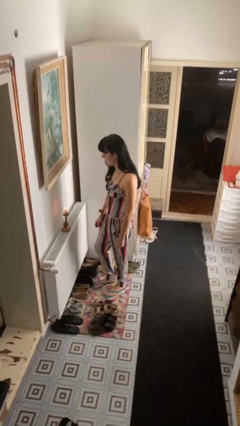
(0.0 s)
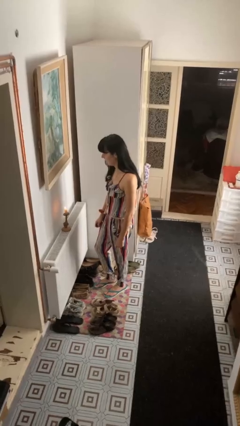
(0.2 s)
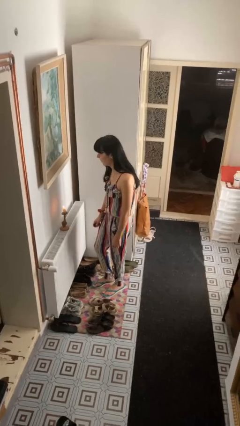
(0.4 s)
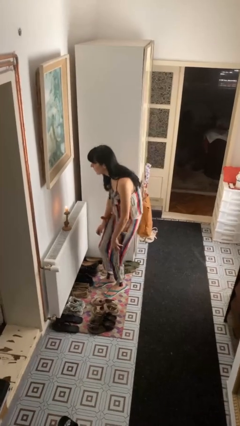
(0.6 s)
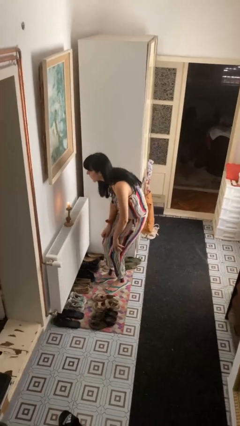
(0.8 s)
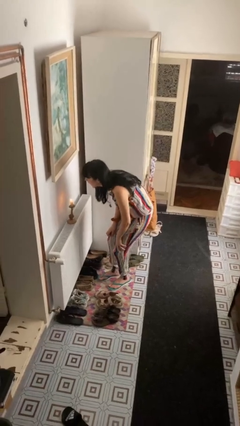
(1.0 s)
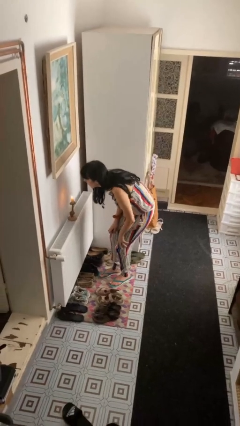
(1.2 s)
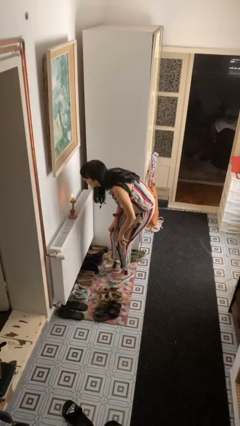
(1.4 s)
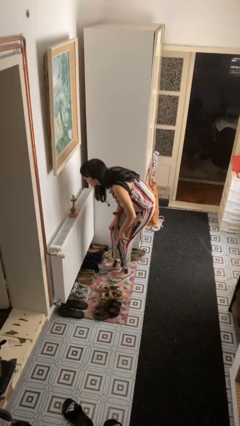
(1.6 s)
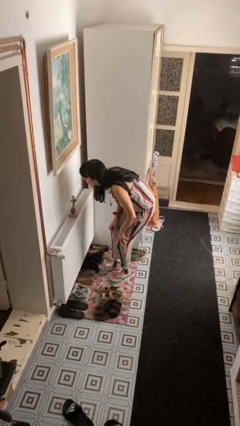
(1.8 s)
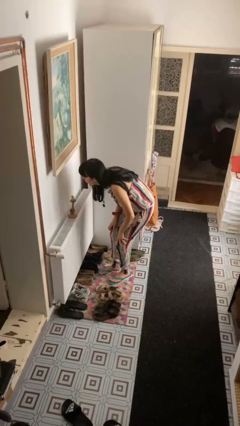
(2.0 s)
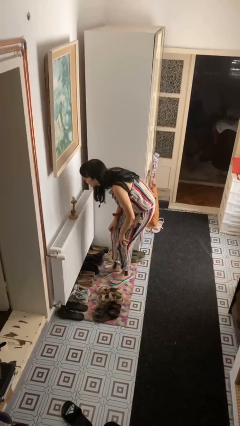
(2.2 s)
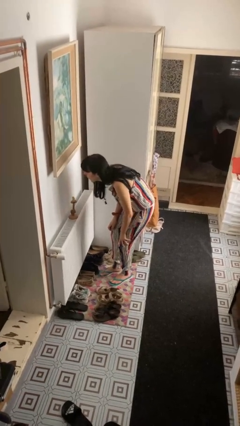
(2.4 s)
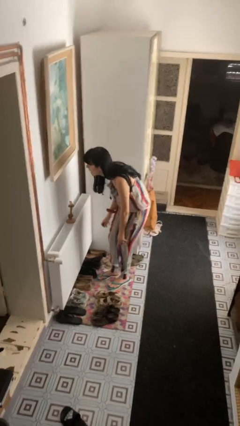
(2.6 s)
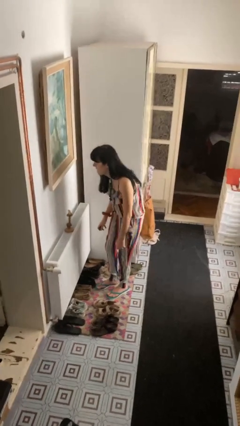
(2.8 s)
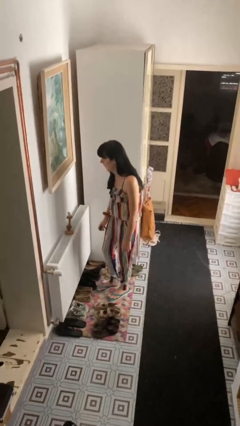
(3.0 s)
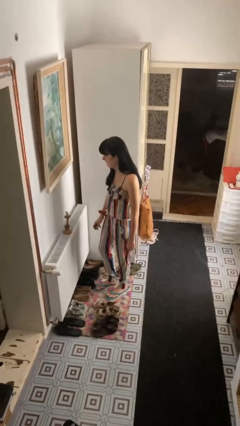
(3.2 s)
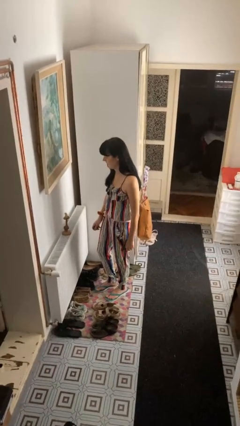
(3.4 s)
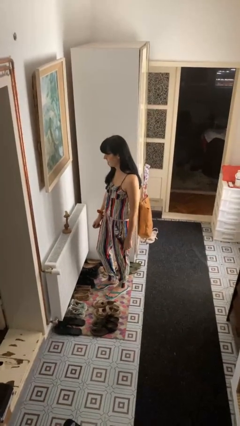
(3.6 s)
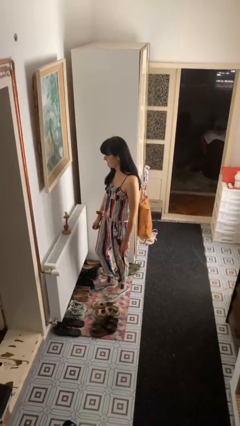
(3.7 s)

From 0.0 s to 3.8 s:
person extinguishes candle

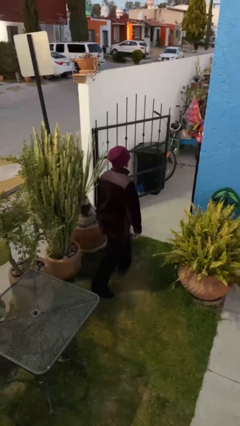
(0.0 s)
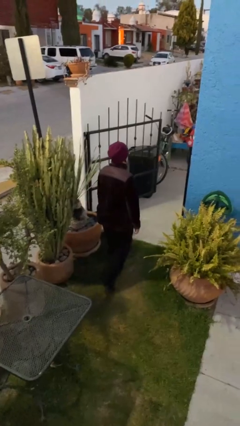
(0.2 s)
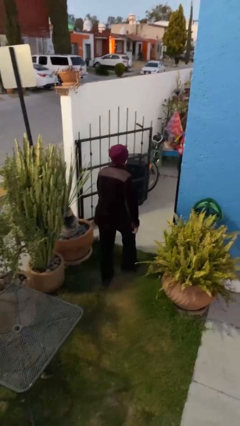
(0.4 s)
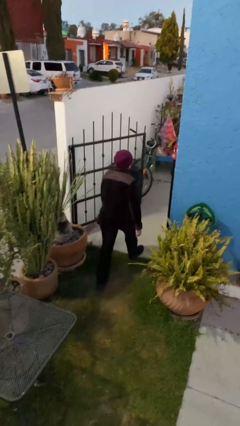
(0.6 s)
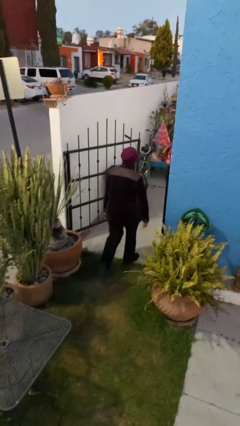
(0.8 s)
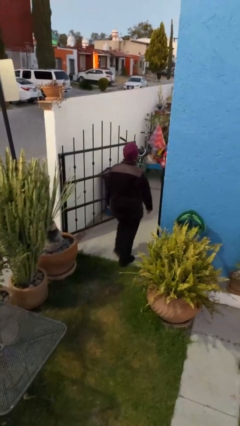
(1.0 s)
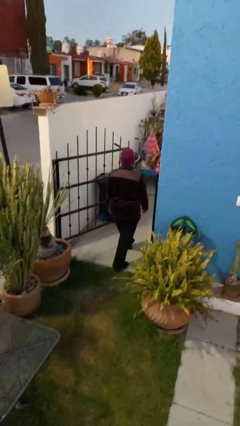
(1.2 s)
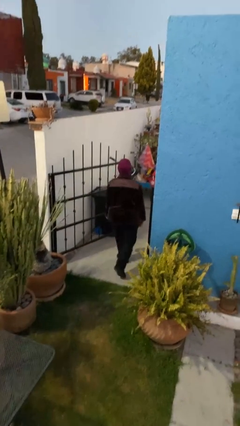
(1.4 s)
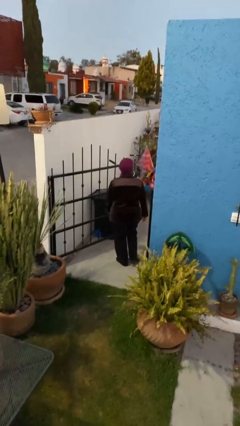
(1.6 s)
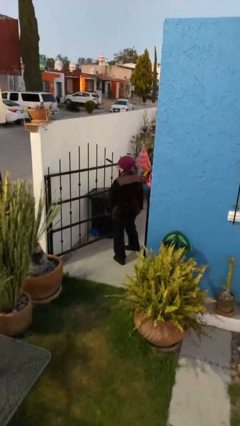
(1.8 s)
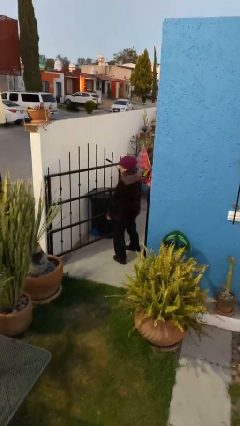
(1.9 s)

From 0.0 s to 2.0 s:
person enters scene through structure

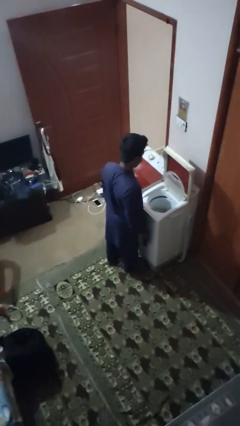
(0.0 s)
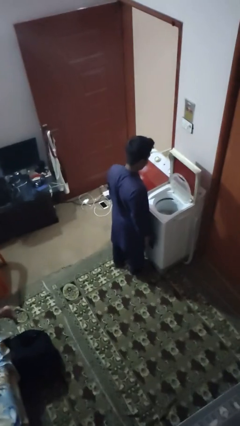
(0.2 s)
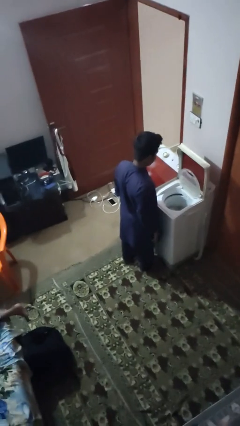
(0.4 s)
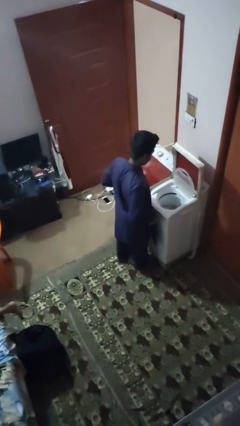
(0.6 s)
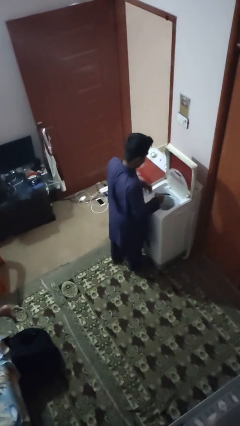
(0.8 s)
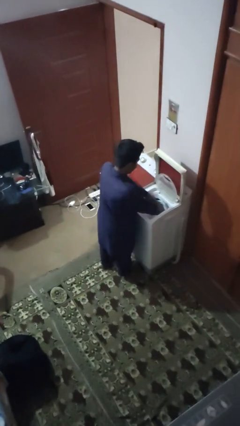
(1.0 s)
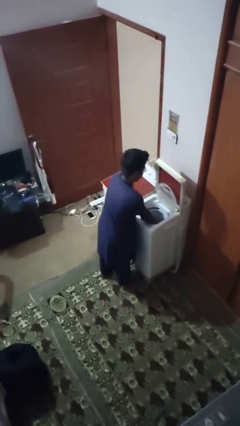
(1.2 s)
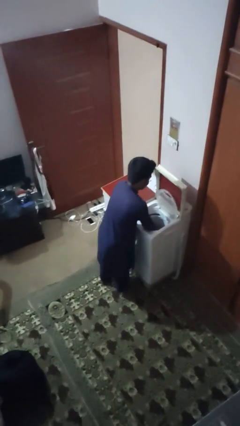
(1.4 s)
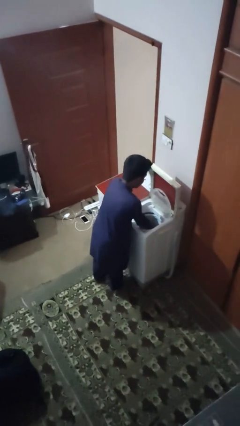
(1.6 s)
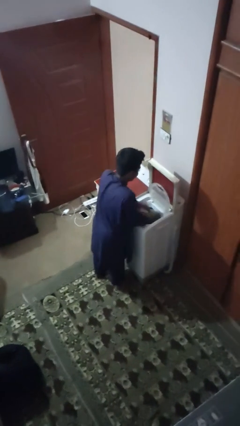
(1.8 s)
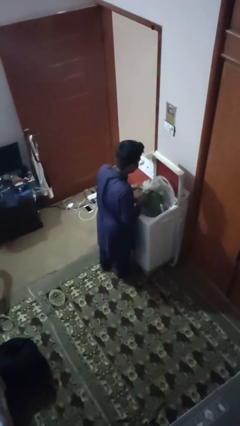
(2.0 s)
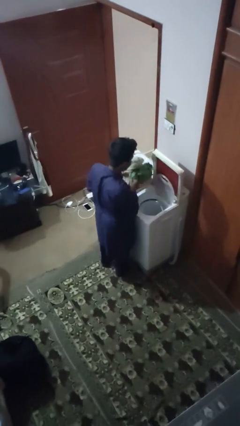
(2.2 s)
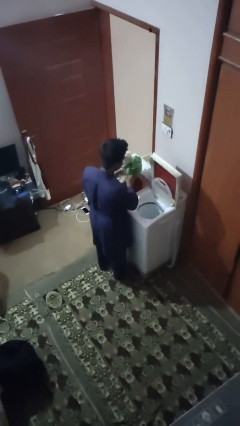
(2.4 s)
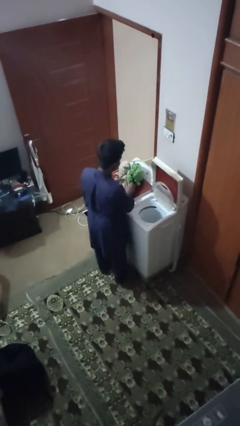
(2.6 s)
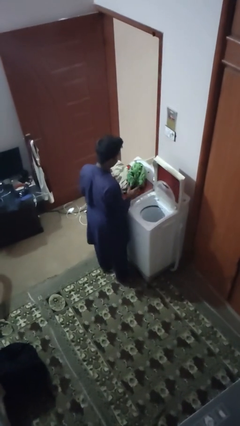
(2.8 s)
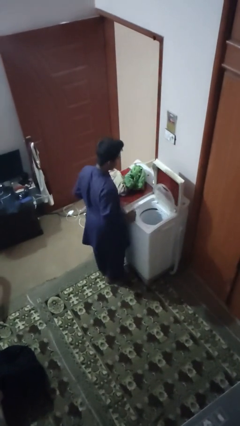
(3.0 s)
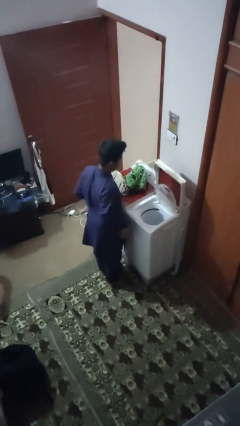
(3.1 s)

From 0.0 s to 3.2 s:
person unloads dryer

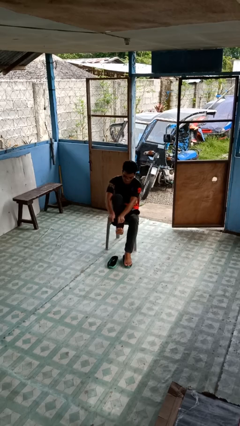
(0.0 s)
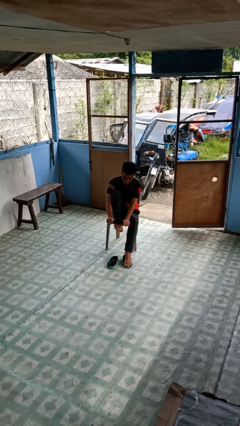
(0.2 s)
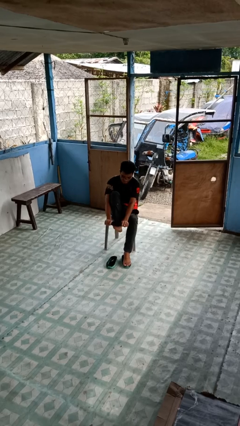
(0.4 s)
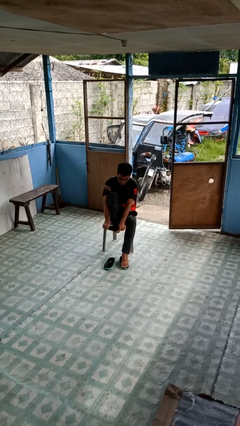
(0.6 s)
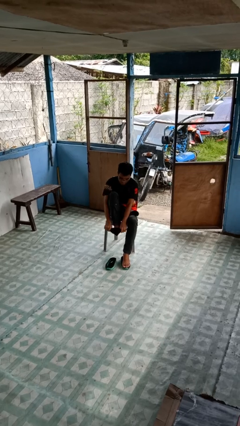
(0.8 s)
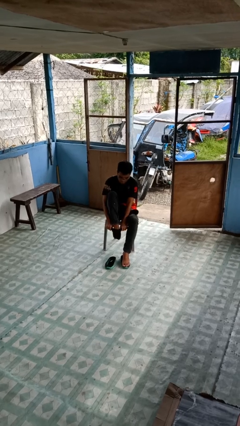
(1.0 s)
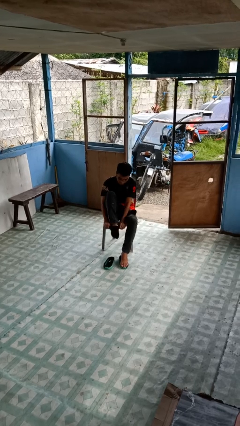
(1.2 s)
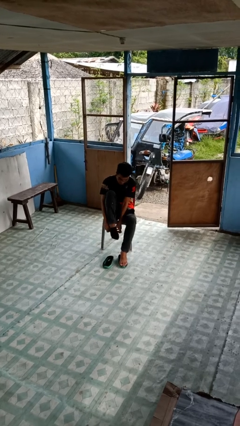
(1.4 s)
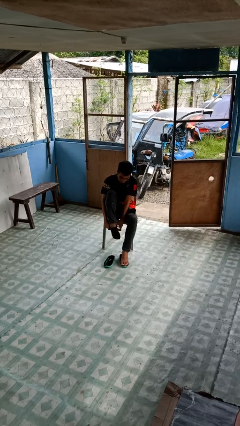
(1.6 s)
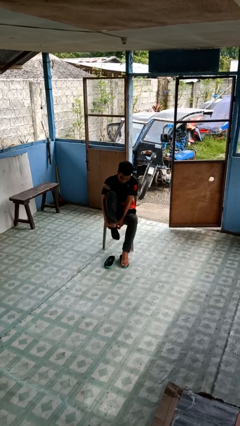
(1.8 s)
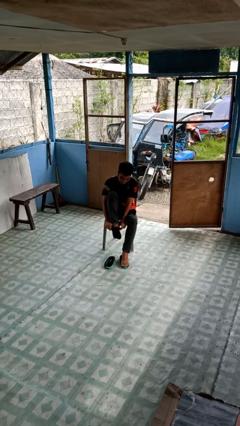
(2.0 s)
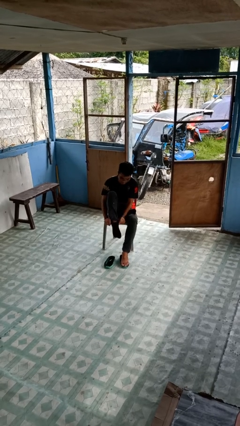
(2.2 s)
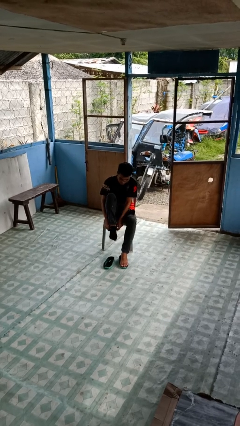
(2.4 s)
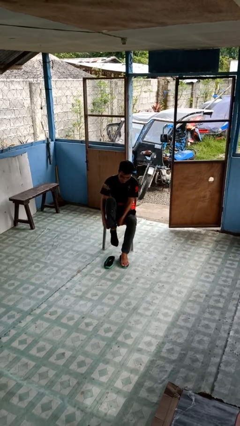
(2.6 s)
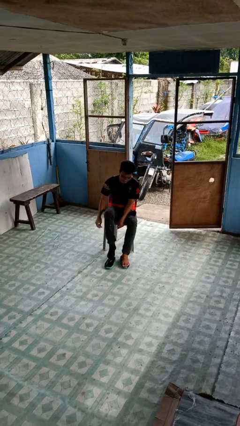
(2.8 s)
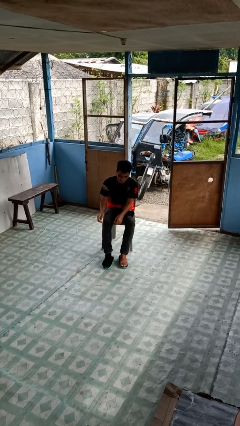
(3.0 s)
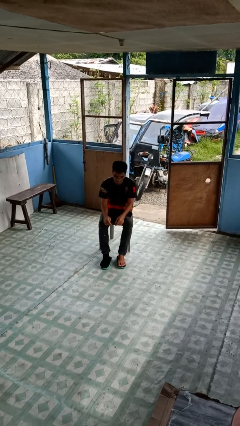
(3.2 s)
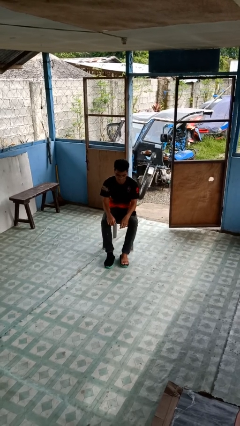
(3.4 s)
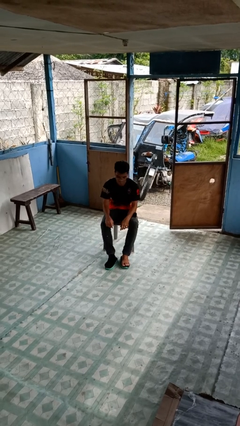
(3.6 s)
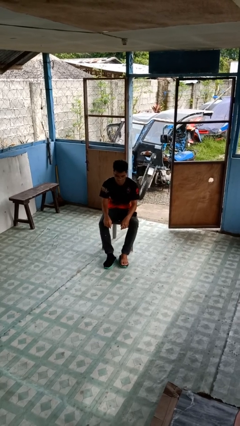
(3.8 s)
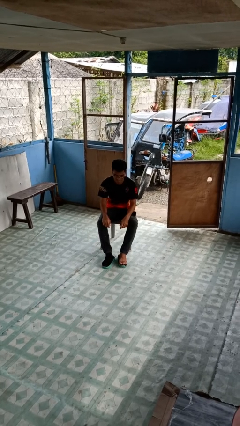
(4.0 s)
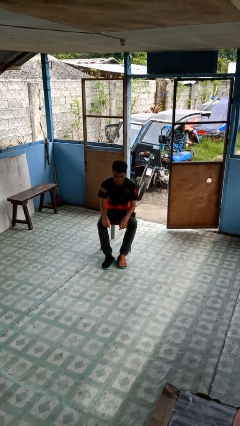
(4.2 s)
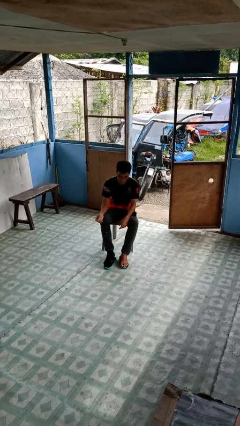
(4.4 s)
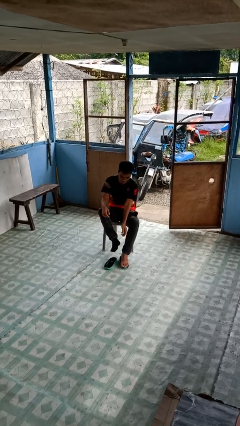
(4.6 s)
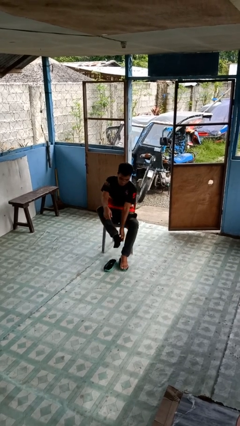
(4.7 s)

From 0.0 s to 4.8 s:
person puts on socks

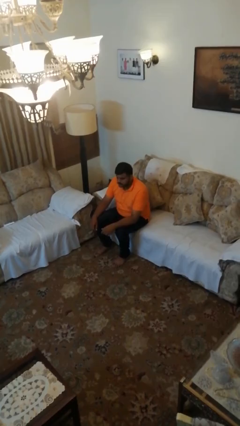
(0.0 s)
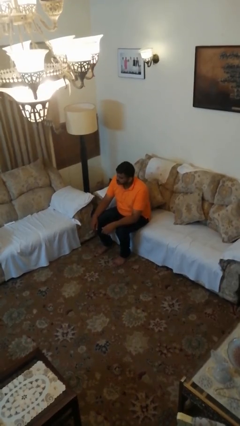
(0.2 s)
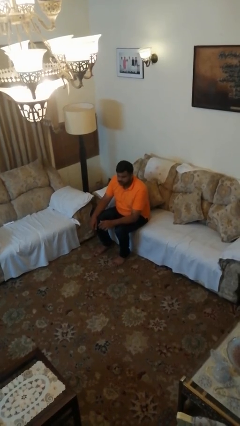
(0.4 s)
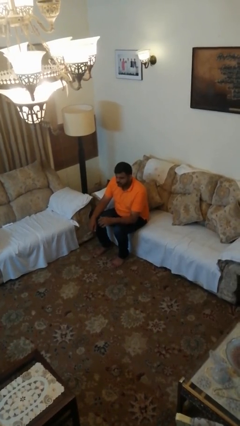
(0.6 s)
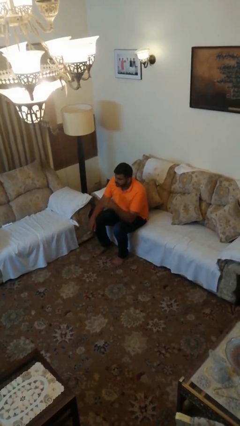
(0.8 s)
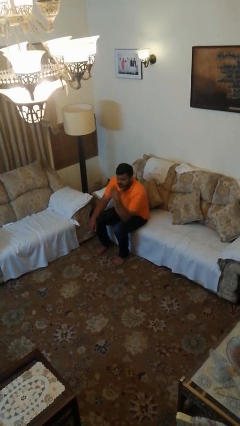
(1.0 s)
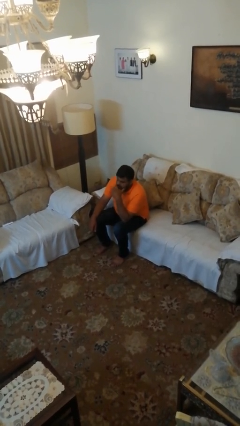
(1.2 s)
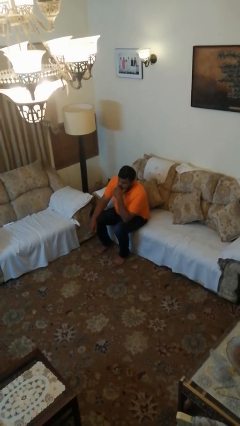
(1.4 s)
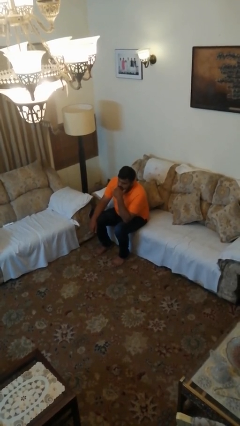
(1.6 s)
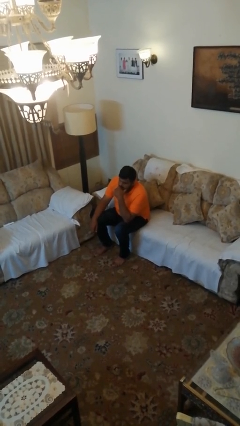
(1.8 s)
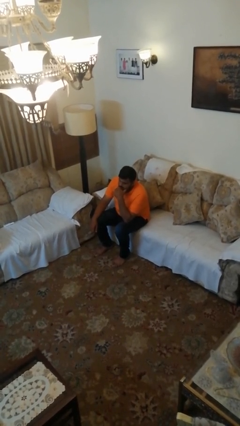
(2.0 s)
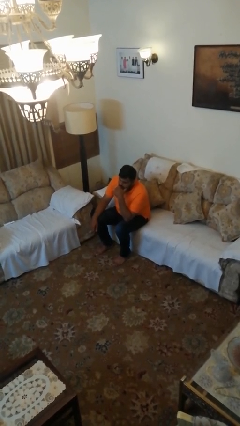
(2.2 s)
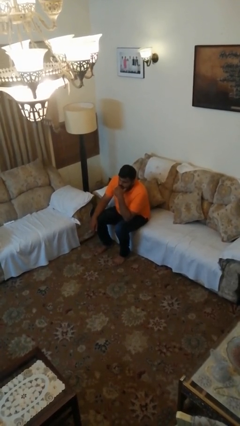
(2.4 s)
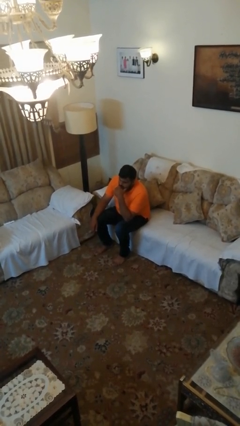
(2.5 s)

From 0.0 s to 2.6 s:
person strokes chin

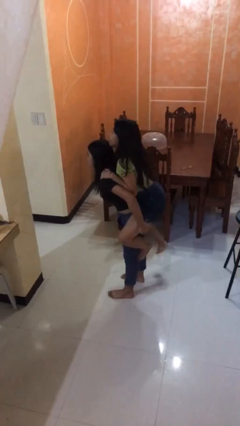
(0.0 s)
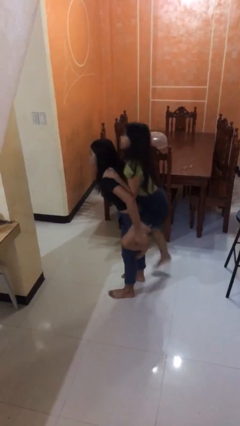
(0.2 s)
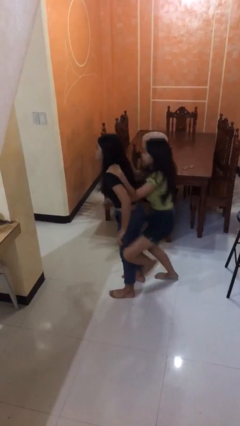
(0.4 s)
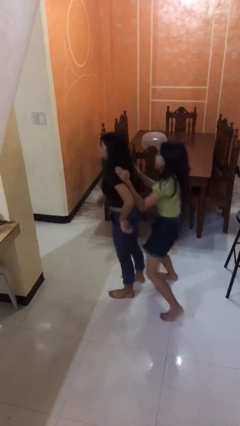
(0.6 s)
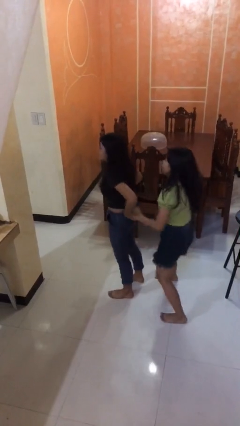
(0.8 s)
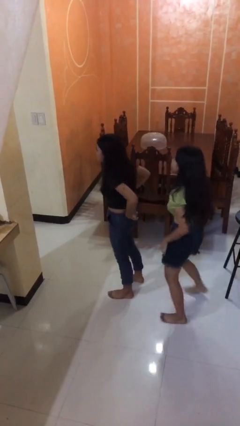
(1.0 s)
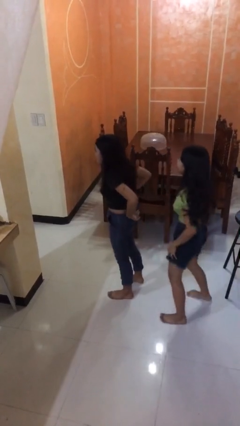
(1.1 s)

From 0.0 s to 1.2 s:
person puts down person
